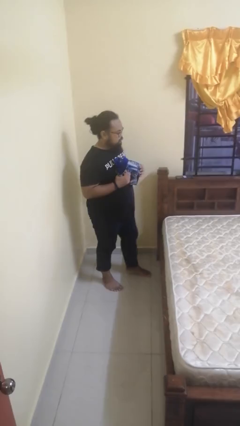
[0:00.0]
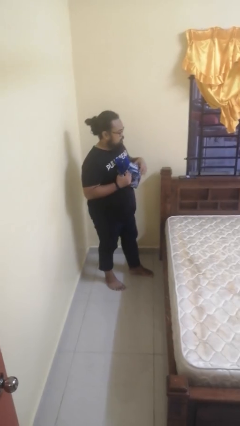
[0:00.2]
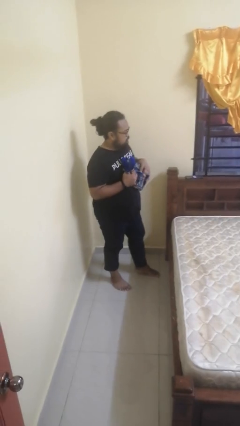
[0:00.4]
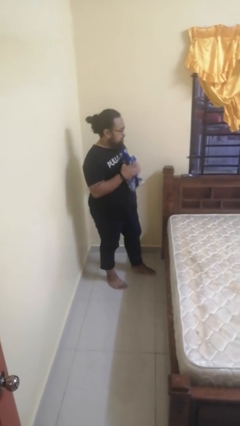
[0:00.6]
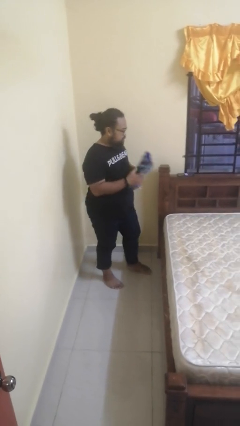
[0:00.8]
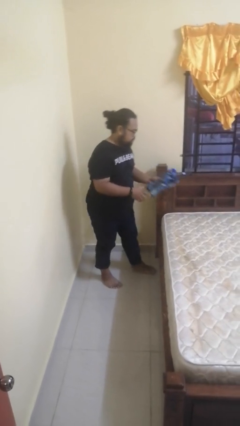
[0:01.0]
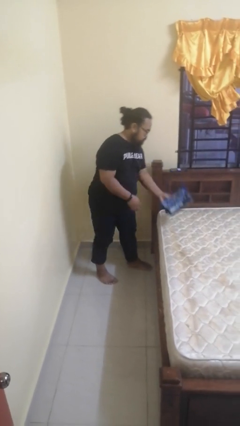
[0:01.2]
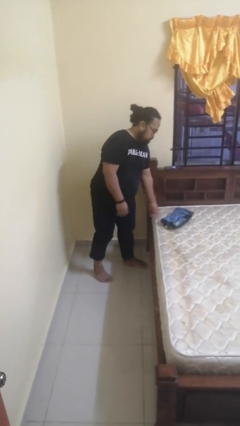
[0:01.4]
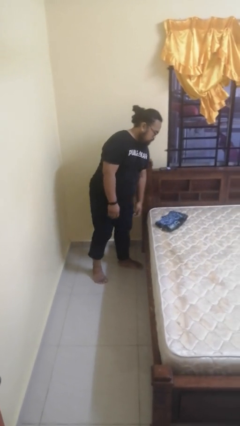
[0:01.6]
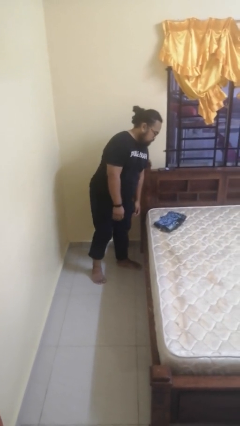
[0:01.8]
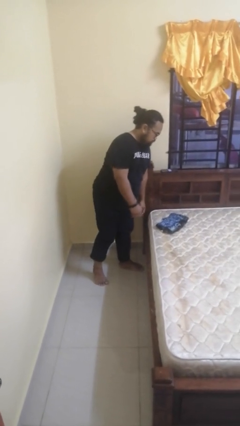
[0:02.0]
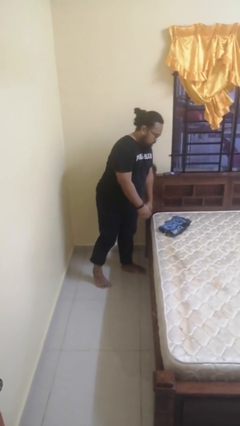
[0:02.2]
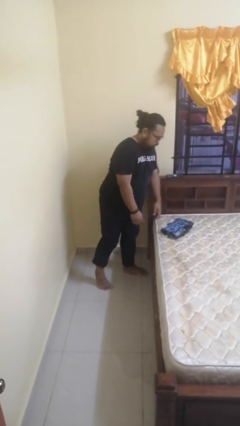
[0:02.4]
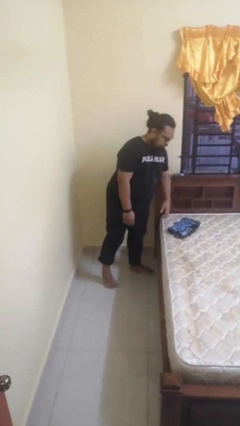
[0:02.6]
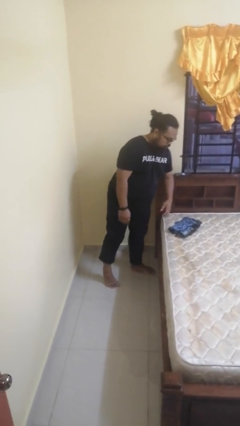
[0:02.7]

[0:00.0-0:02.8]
person puts down object on bed

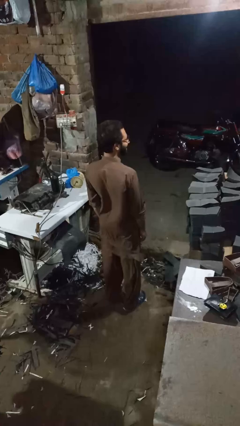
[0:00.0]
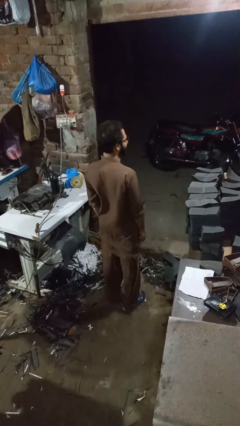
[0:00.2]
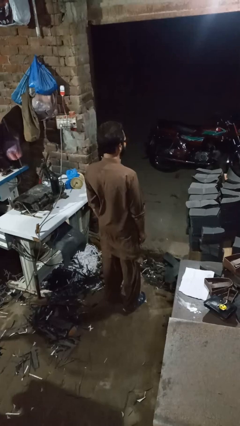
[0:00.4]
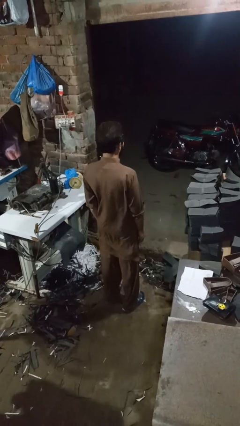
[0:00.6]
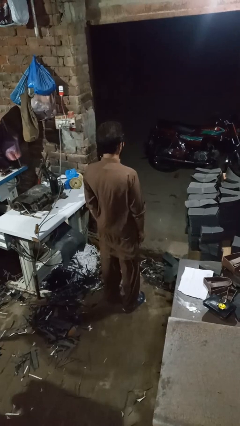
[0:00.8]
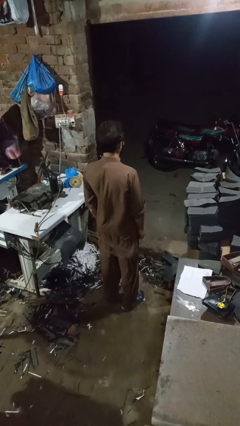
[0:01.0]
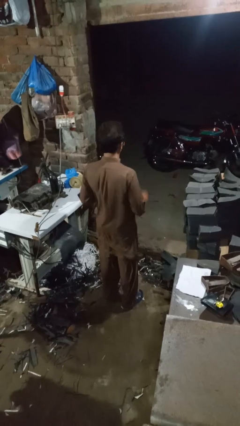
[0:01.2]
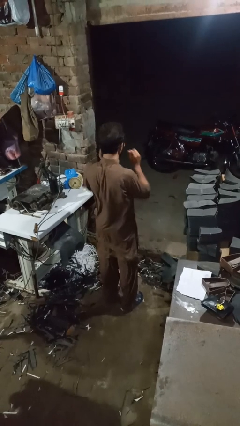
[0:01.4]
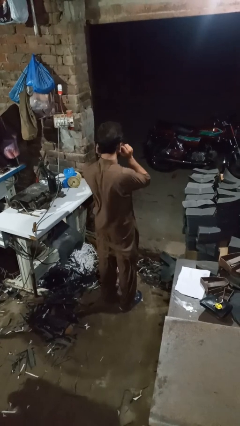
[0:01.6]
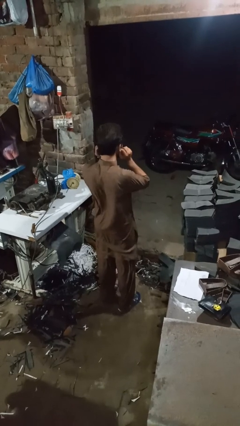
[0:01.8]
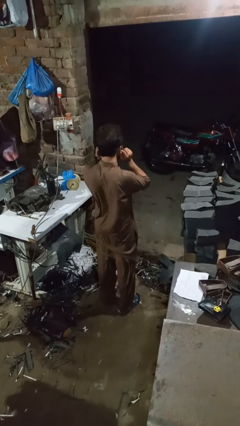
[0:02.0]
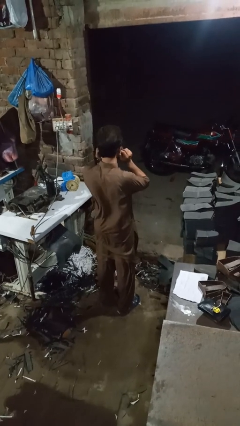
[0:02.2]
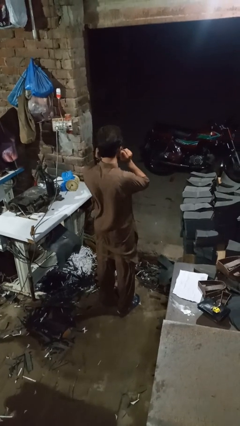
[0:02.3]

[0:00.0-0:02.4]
person touches earlobe

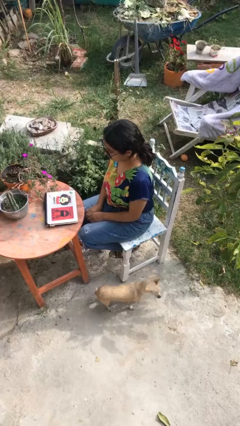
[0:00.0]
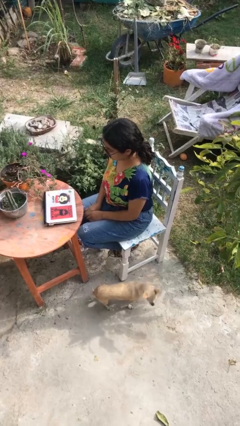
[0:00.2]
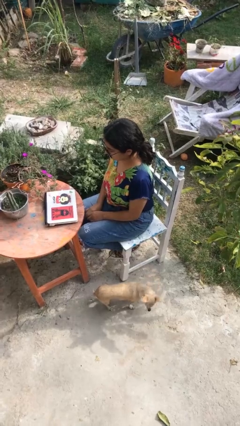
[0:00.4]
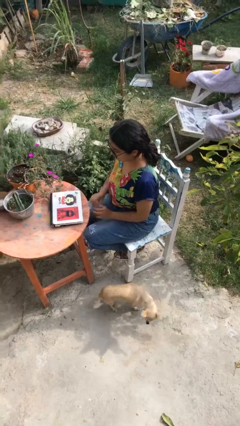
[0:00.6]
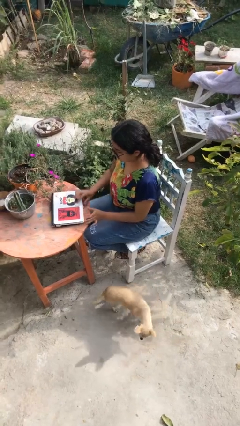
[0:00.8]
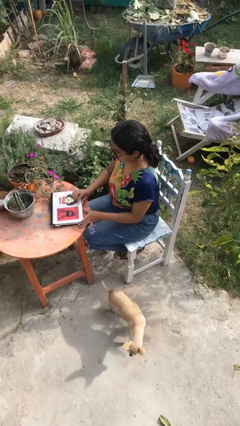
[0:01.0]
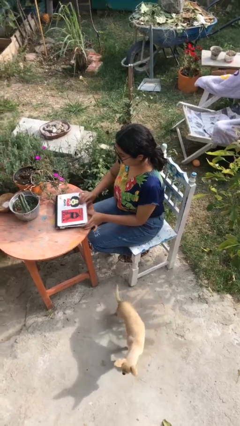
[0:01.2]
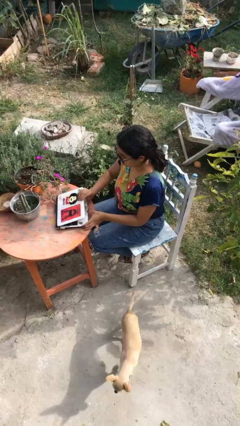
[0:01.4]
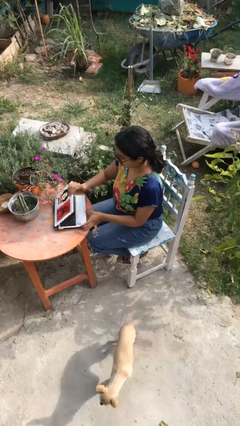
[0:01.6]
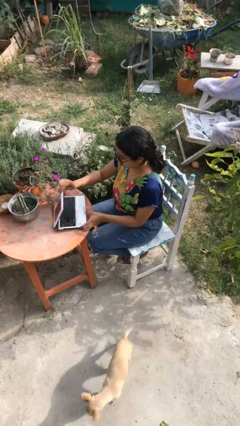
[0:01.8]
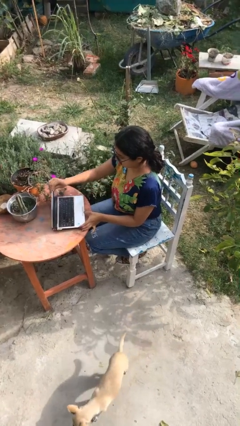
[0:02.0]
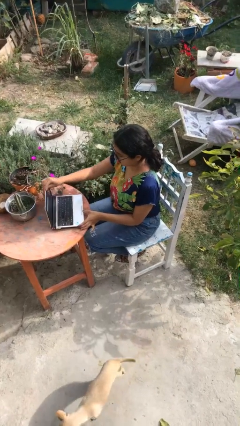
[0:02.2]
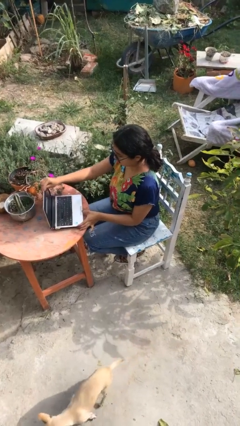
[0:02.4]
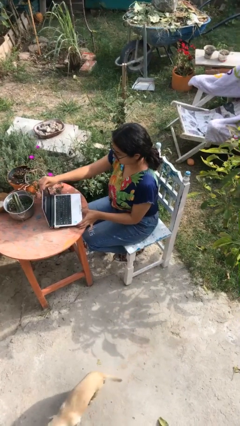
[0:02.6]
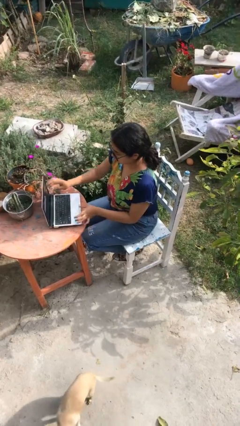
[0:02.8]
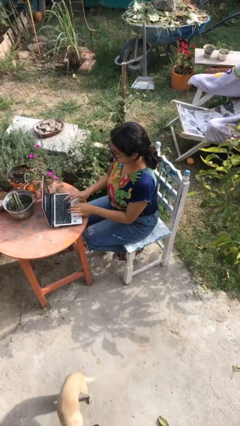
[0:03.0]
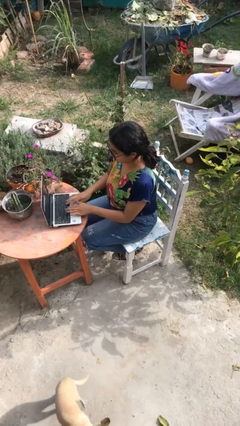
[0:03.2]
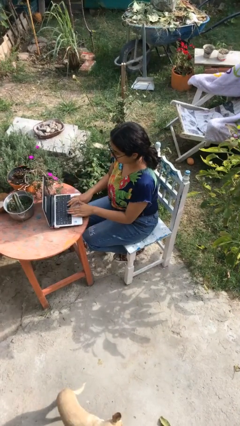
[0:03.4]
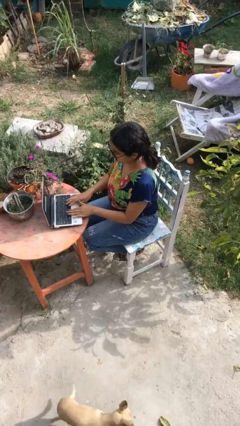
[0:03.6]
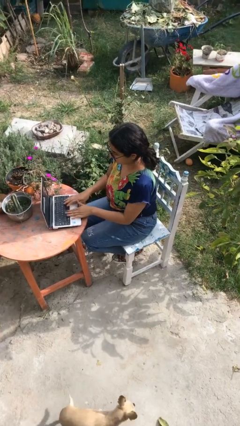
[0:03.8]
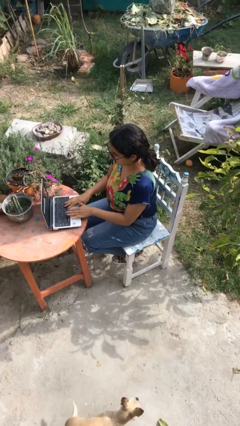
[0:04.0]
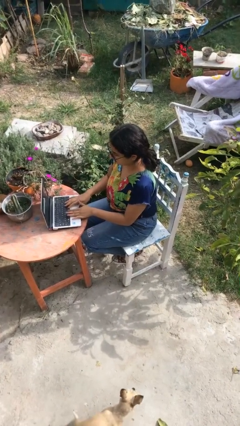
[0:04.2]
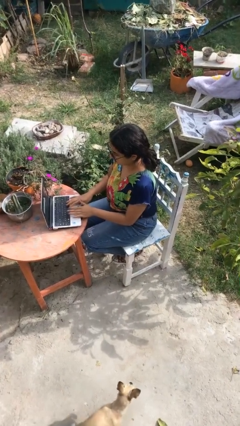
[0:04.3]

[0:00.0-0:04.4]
person opens laptop

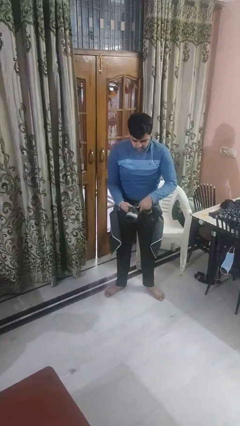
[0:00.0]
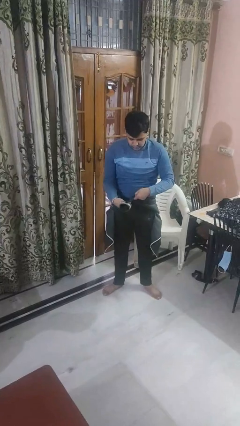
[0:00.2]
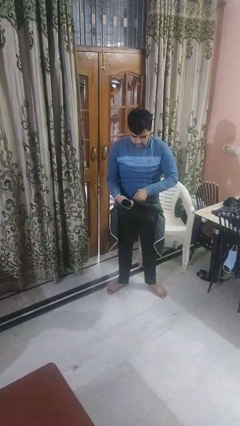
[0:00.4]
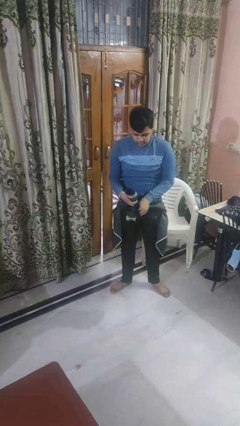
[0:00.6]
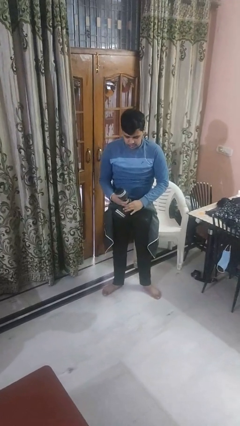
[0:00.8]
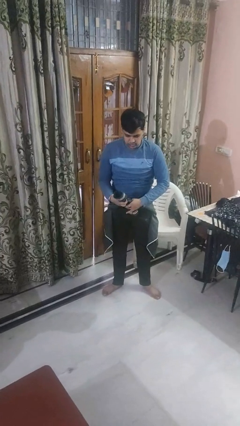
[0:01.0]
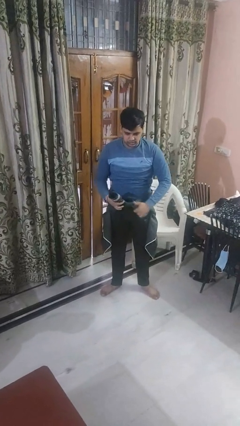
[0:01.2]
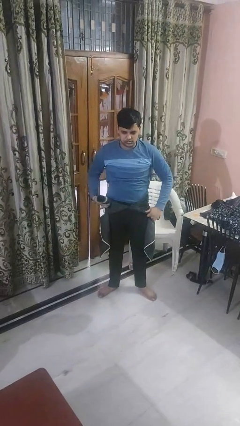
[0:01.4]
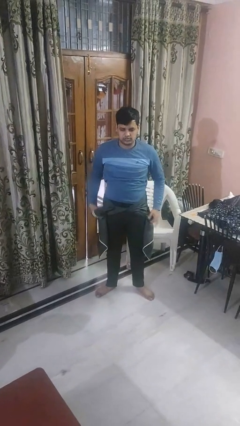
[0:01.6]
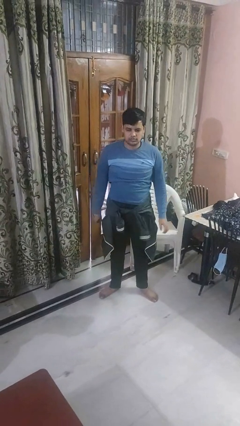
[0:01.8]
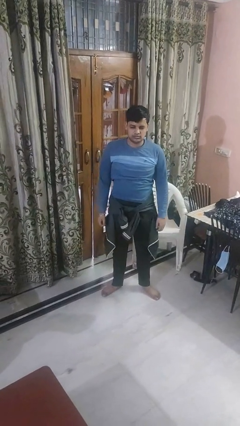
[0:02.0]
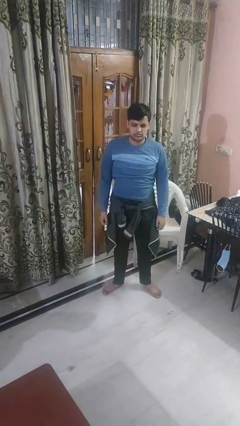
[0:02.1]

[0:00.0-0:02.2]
person ties jacket around waist

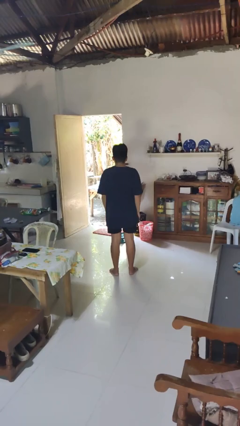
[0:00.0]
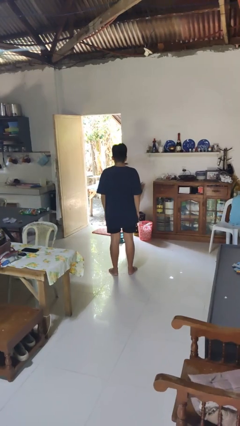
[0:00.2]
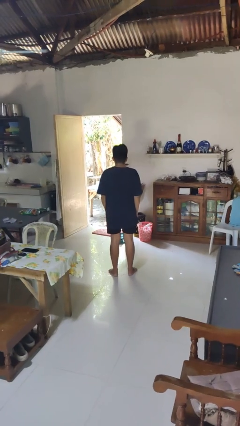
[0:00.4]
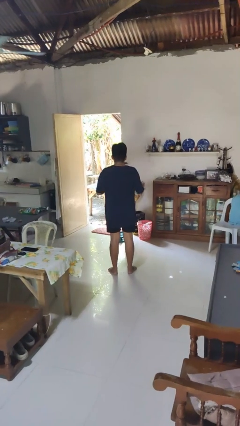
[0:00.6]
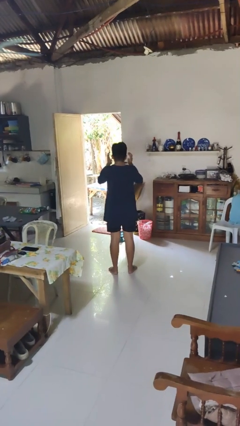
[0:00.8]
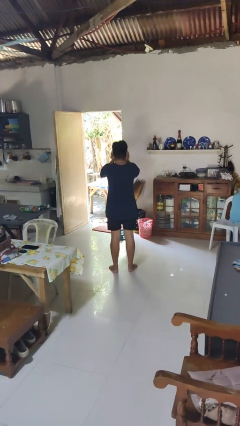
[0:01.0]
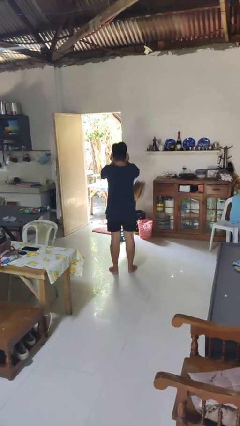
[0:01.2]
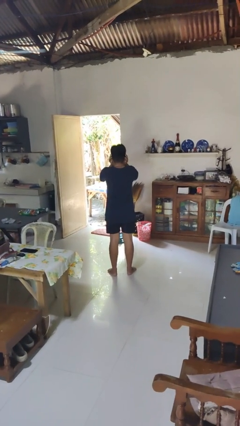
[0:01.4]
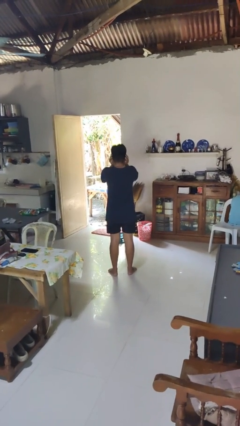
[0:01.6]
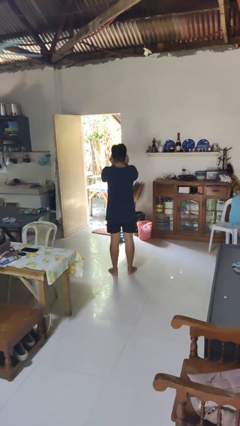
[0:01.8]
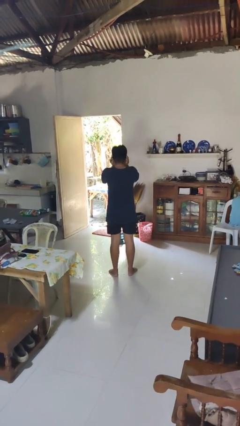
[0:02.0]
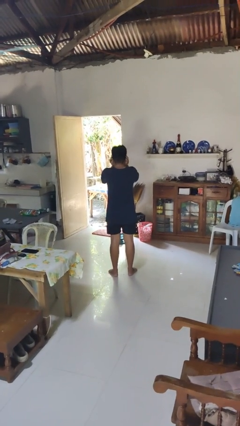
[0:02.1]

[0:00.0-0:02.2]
person puts fingers in ear

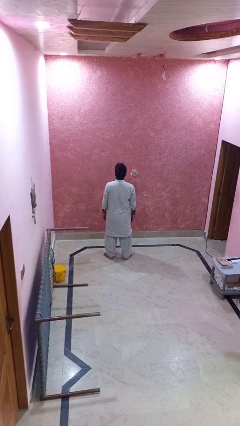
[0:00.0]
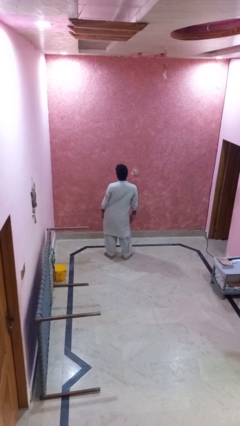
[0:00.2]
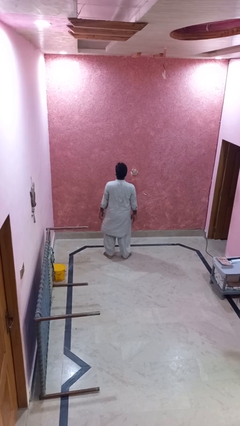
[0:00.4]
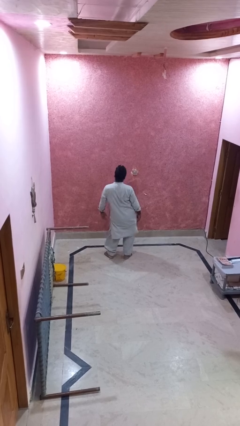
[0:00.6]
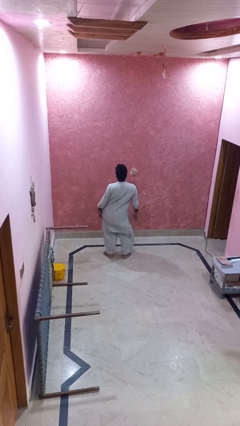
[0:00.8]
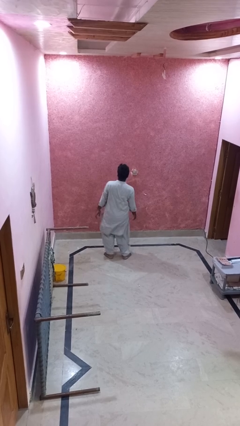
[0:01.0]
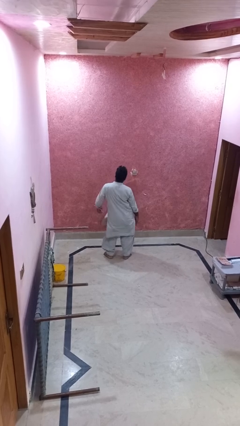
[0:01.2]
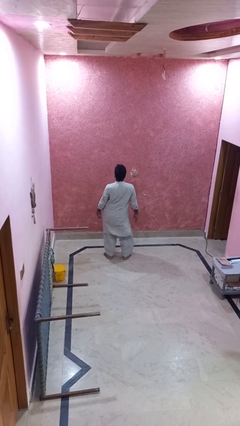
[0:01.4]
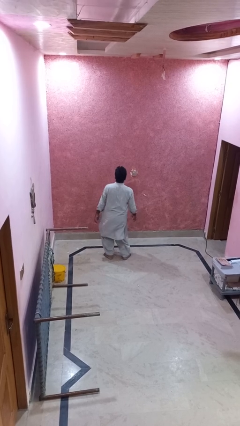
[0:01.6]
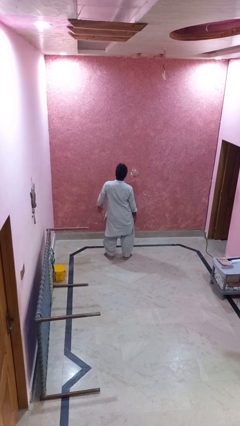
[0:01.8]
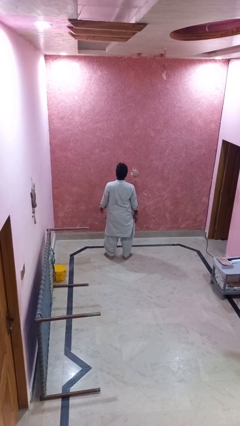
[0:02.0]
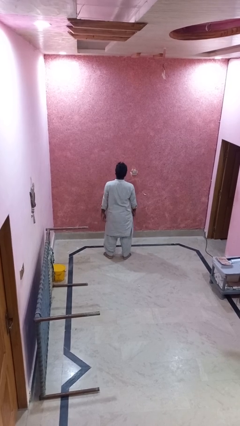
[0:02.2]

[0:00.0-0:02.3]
person wiggles hips

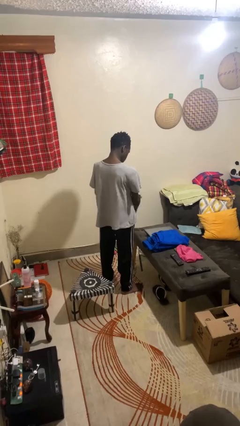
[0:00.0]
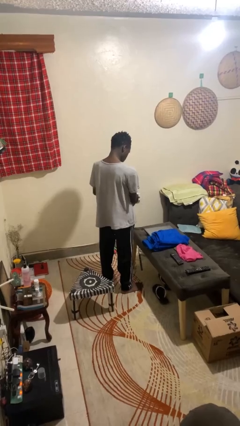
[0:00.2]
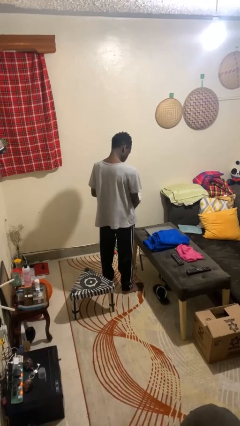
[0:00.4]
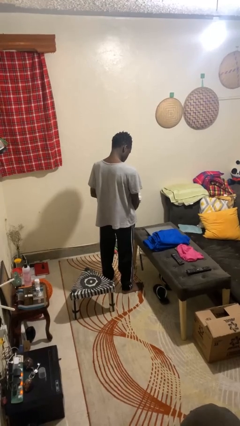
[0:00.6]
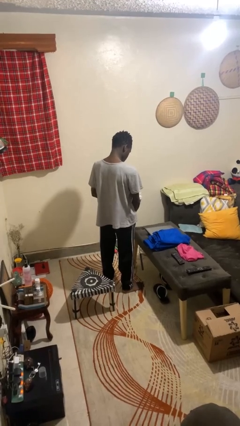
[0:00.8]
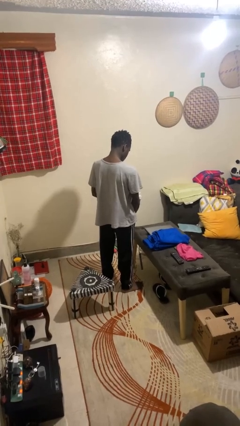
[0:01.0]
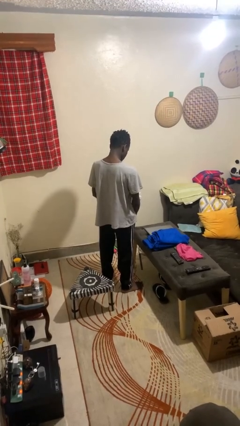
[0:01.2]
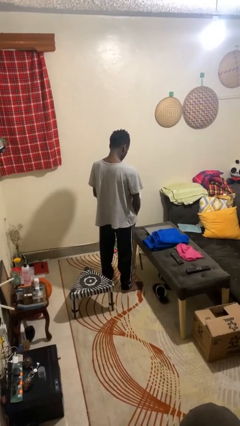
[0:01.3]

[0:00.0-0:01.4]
person swats bug
